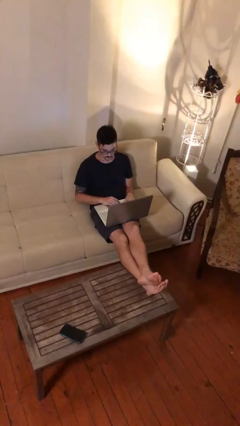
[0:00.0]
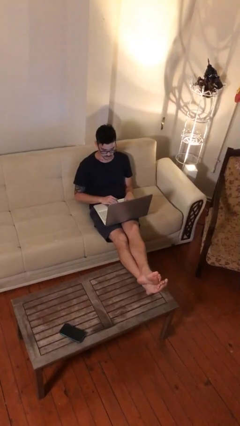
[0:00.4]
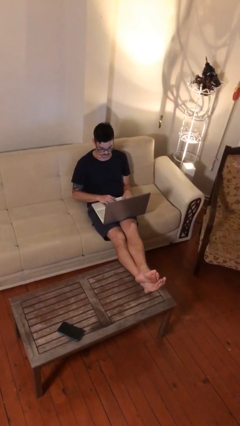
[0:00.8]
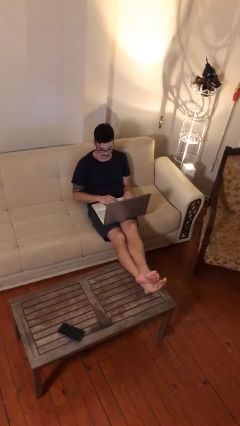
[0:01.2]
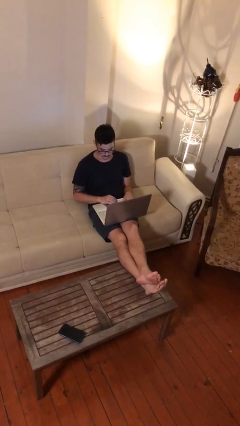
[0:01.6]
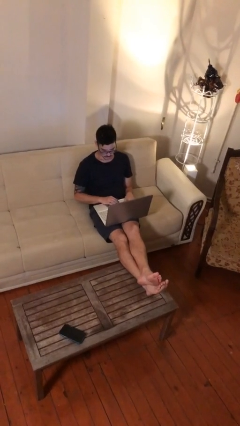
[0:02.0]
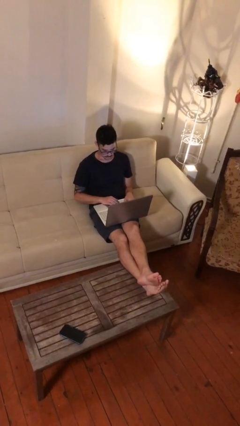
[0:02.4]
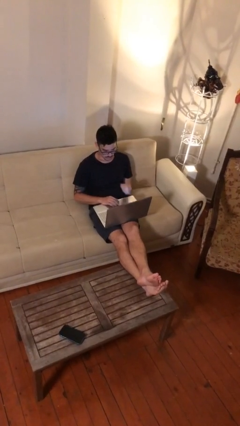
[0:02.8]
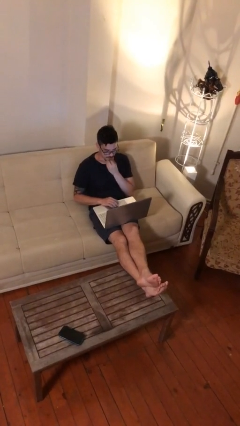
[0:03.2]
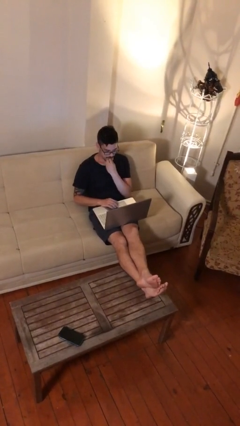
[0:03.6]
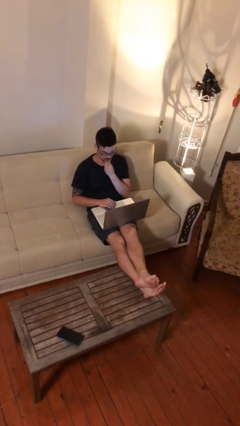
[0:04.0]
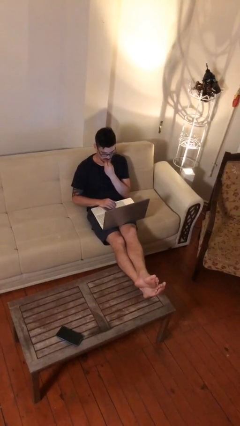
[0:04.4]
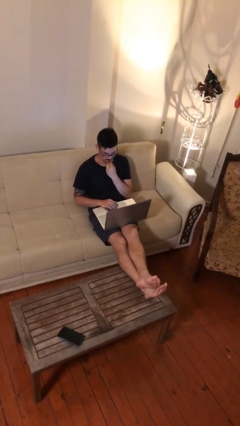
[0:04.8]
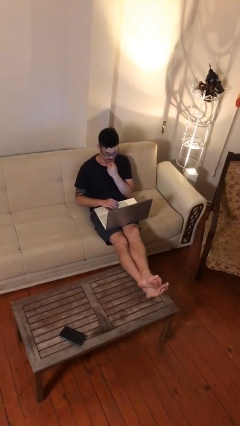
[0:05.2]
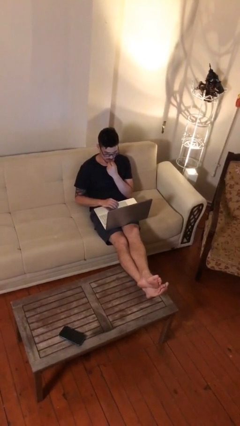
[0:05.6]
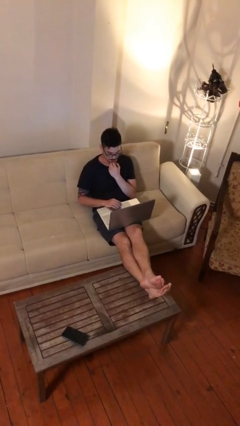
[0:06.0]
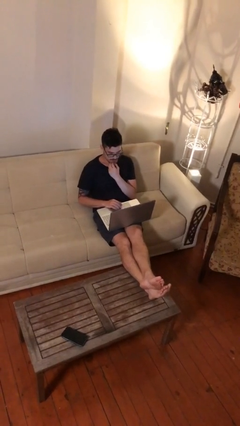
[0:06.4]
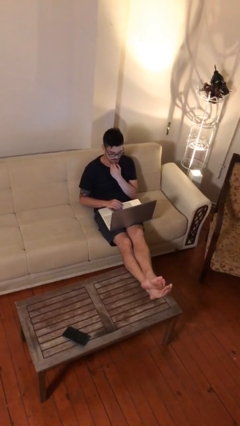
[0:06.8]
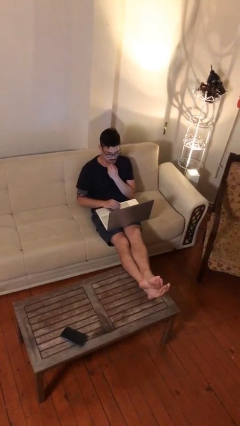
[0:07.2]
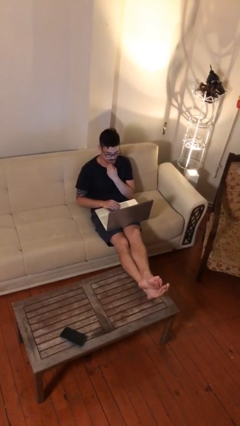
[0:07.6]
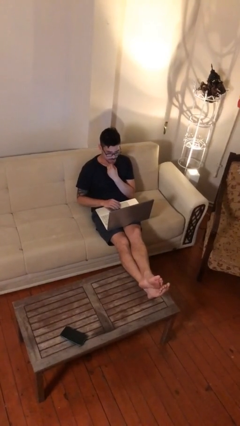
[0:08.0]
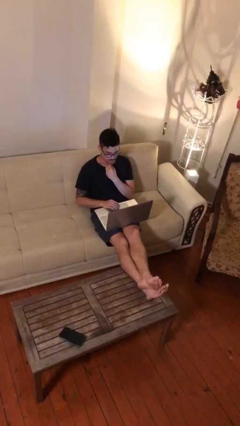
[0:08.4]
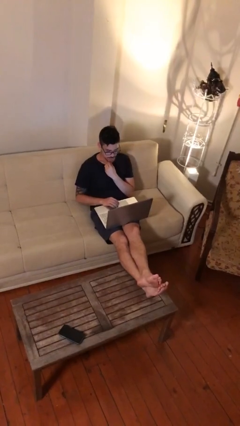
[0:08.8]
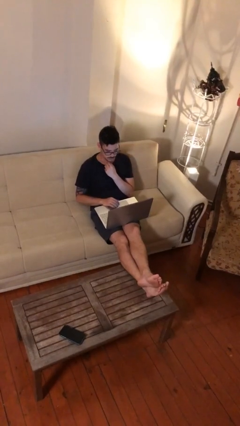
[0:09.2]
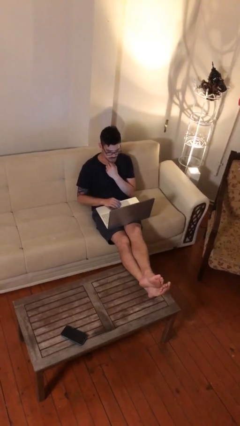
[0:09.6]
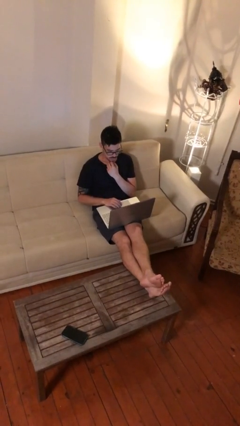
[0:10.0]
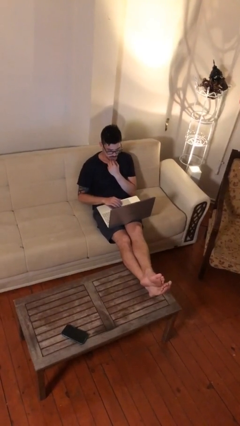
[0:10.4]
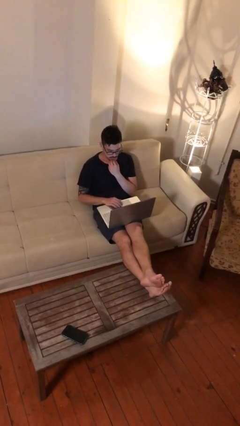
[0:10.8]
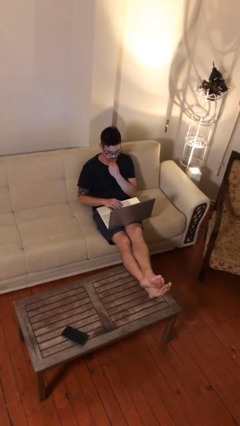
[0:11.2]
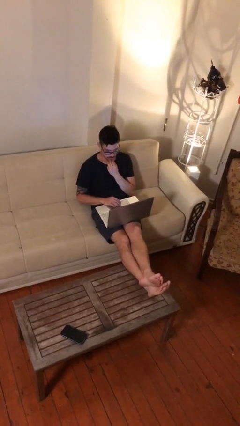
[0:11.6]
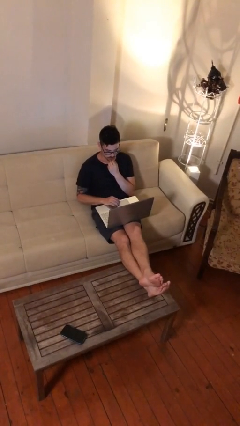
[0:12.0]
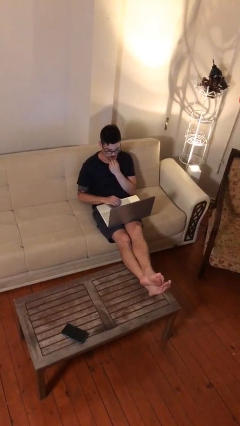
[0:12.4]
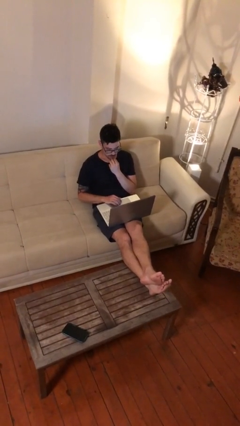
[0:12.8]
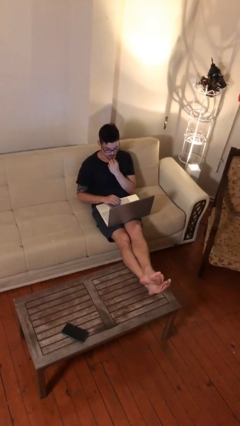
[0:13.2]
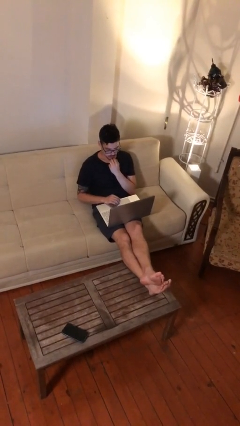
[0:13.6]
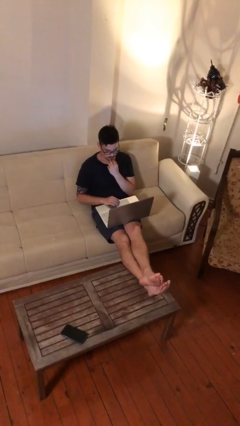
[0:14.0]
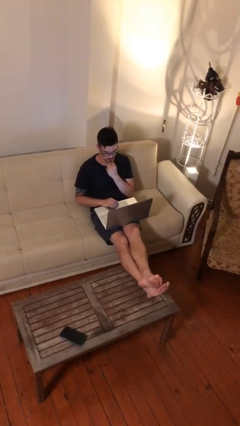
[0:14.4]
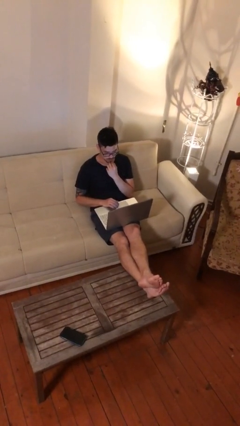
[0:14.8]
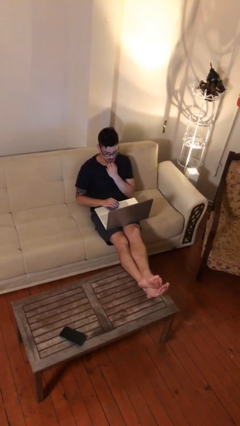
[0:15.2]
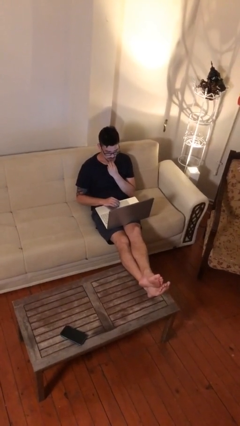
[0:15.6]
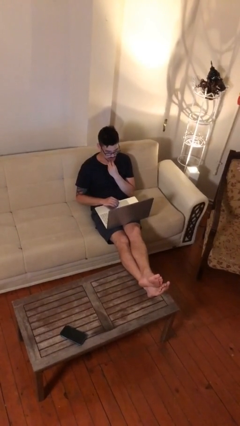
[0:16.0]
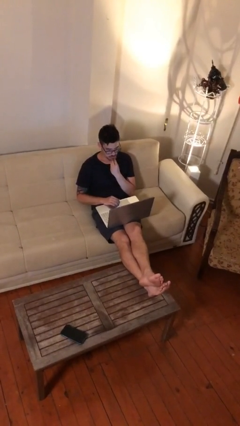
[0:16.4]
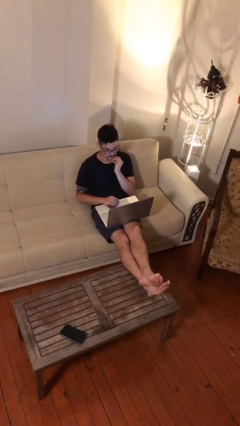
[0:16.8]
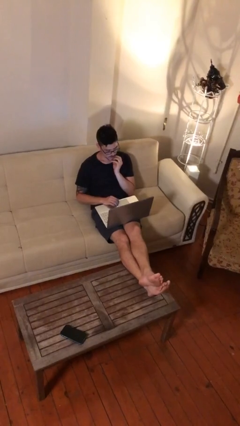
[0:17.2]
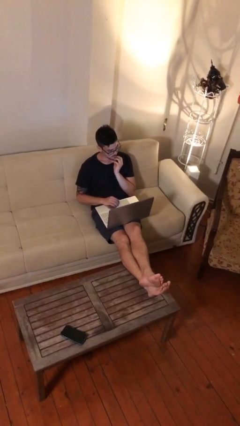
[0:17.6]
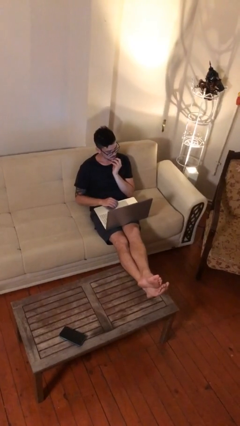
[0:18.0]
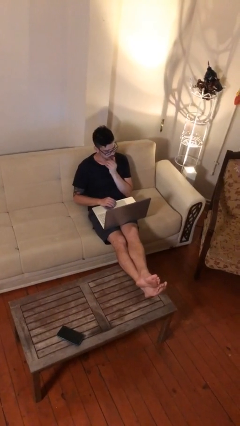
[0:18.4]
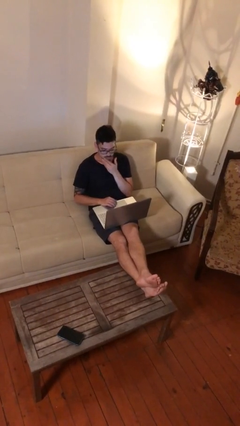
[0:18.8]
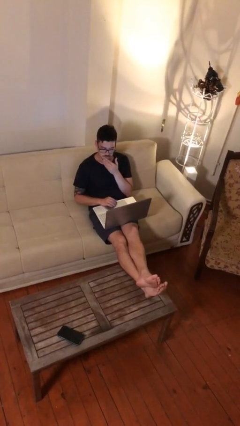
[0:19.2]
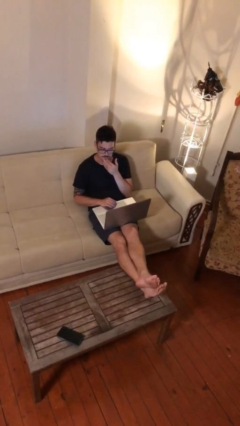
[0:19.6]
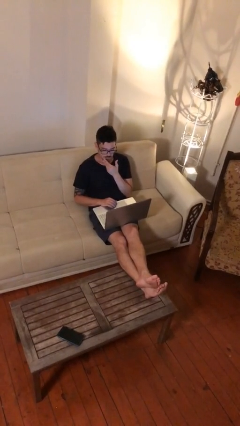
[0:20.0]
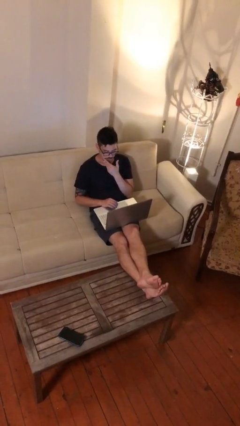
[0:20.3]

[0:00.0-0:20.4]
person interacts with laptop

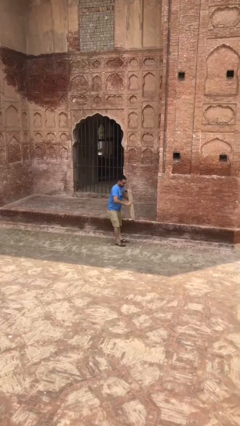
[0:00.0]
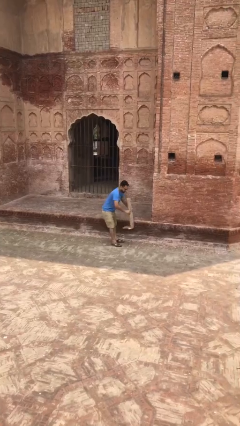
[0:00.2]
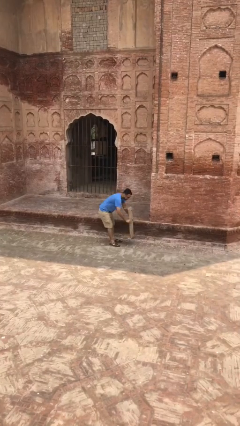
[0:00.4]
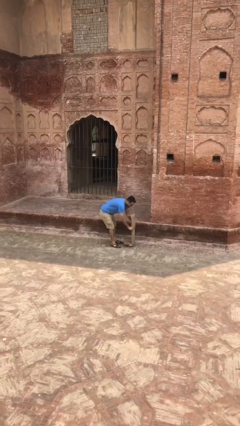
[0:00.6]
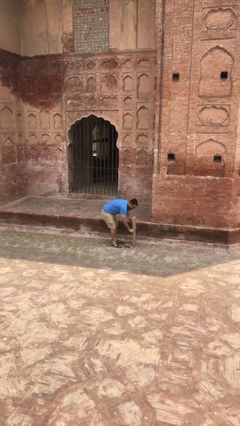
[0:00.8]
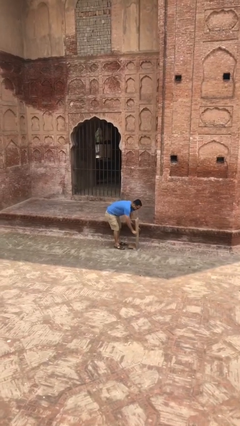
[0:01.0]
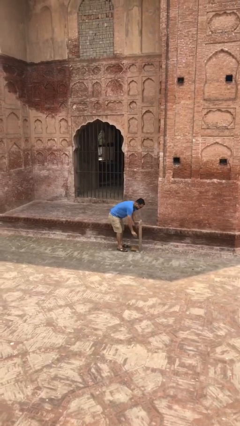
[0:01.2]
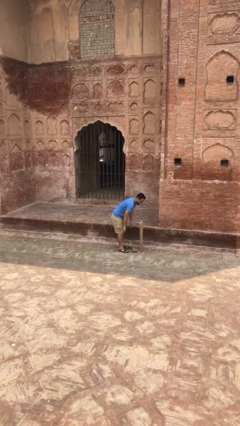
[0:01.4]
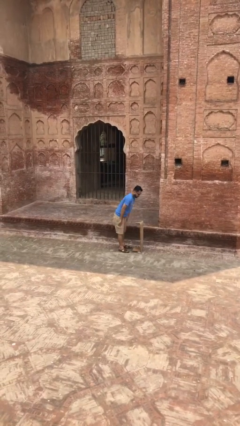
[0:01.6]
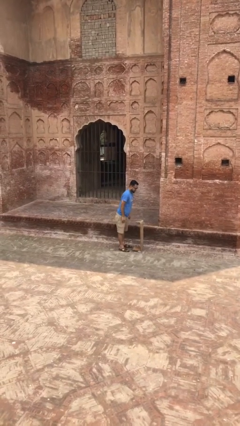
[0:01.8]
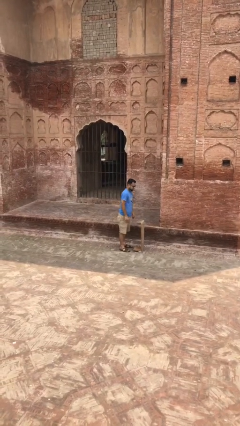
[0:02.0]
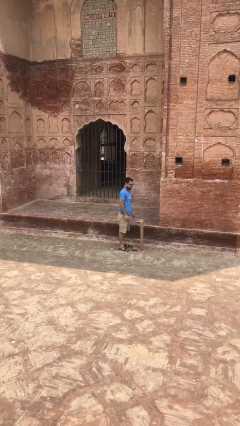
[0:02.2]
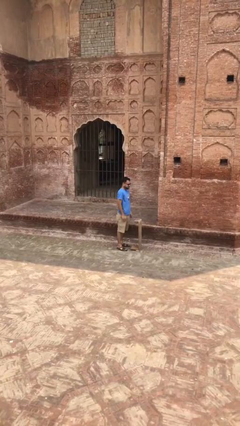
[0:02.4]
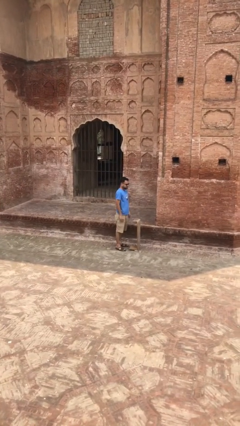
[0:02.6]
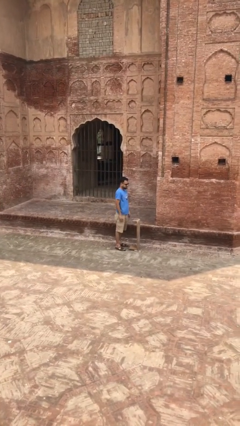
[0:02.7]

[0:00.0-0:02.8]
person puts down object on floor

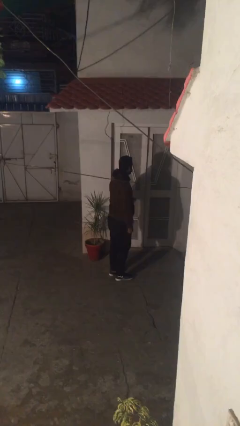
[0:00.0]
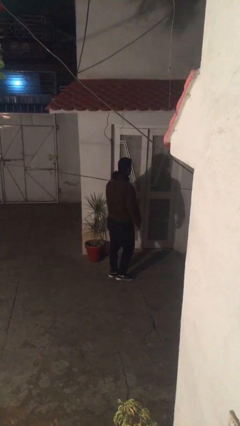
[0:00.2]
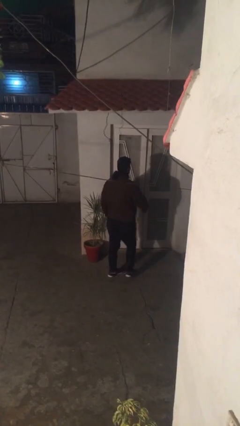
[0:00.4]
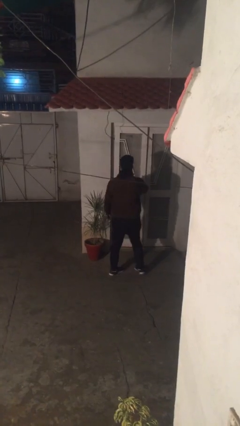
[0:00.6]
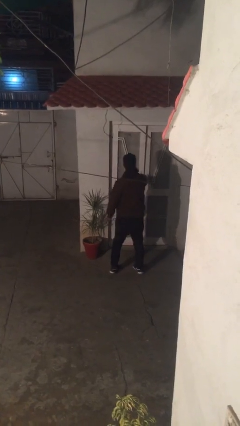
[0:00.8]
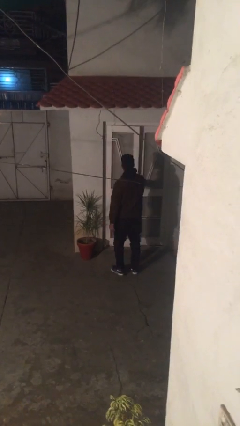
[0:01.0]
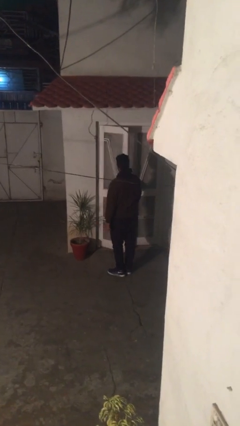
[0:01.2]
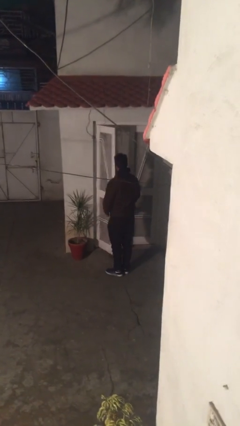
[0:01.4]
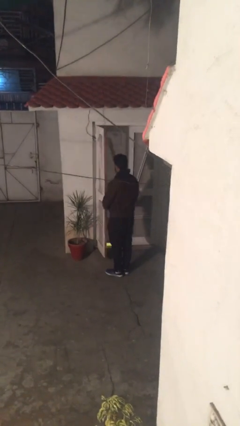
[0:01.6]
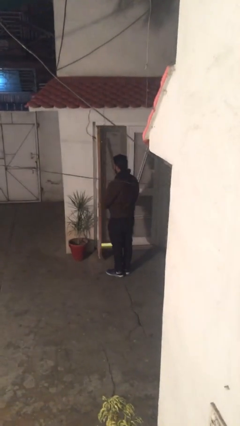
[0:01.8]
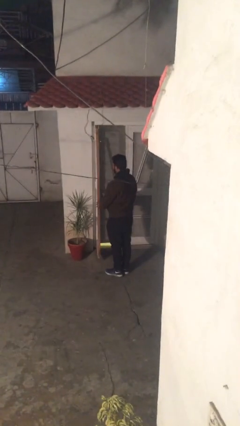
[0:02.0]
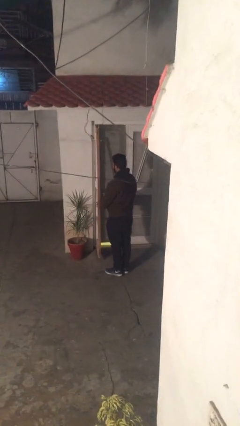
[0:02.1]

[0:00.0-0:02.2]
person opens facility door

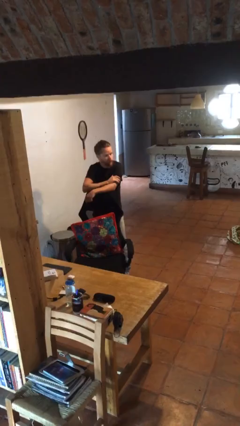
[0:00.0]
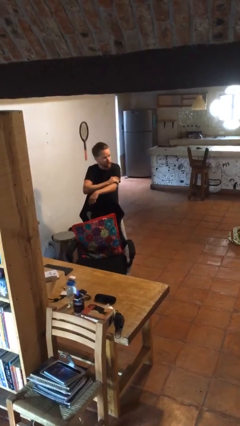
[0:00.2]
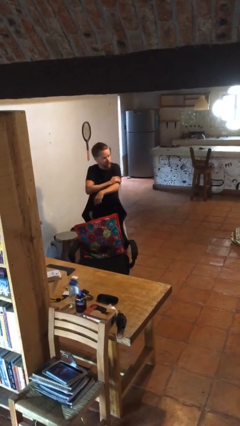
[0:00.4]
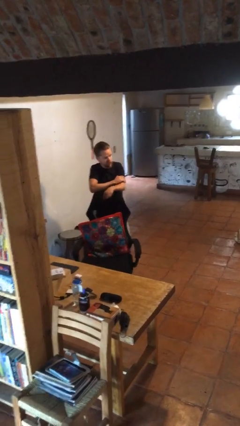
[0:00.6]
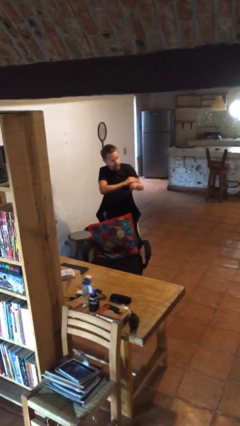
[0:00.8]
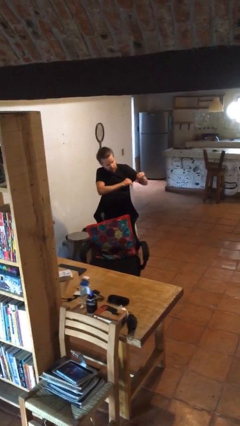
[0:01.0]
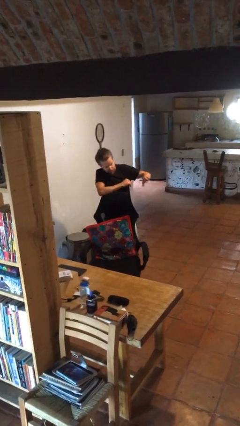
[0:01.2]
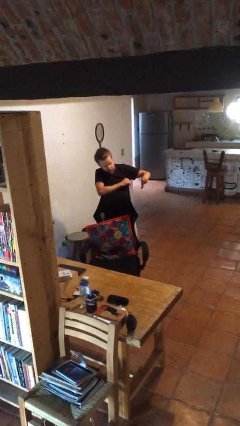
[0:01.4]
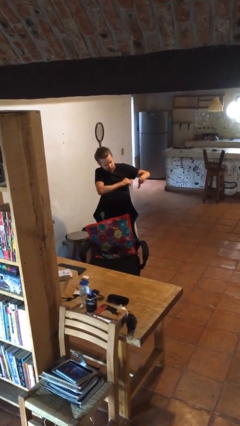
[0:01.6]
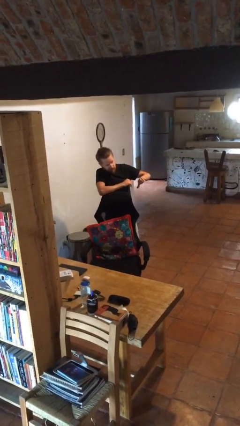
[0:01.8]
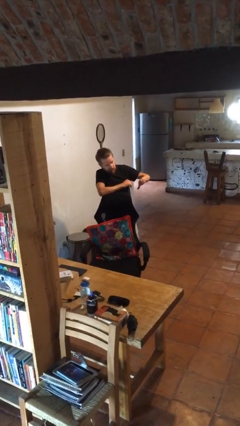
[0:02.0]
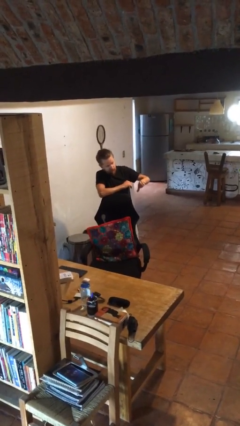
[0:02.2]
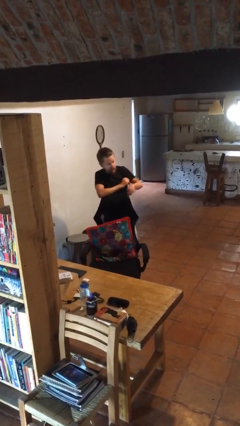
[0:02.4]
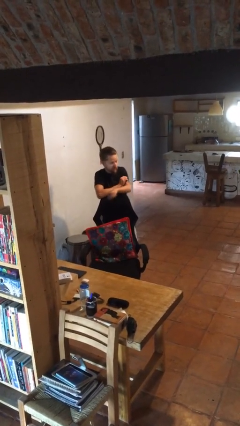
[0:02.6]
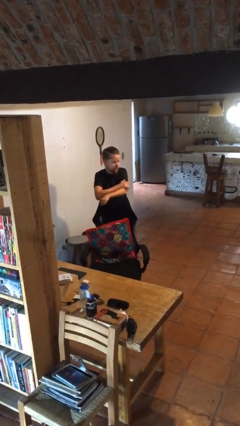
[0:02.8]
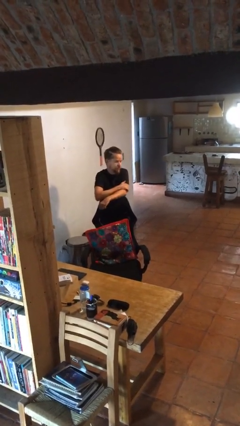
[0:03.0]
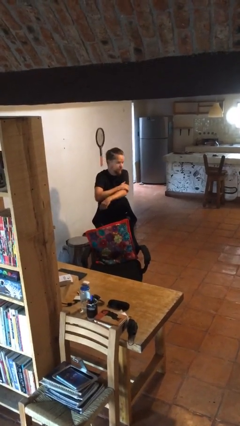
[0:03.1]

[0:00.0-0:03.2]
person gestures thumbs down
